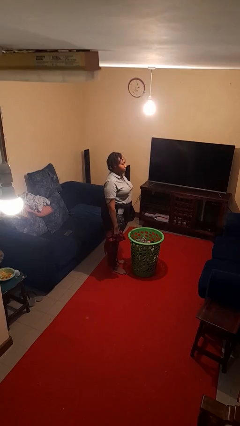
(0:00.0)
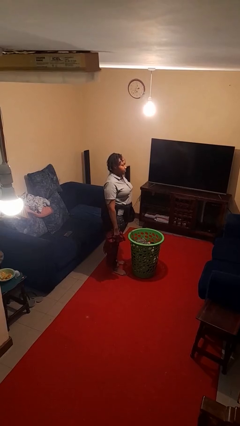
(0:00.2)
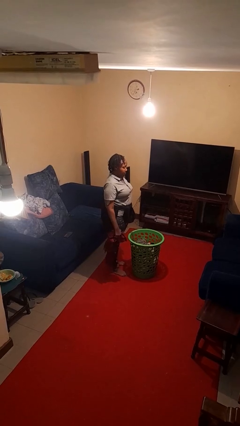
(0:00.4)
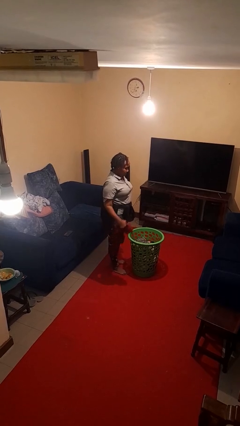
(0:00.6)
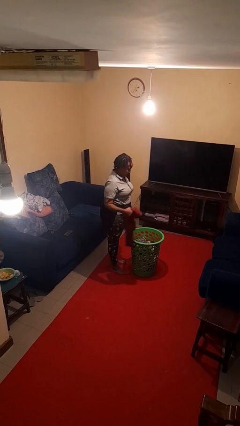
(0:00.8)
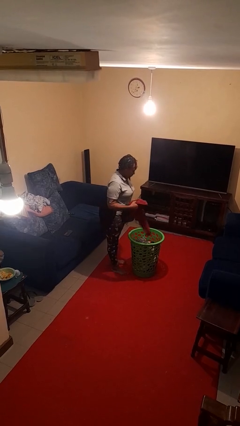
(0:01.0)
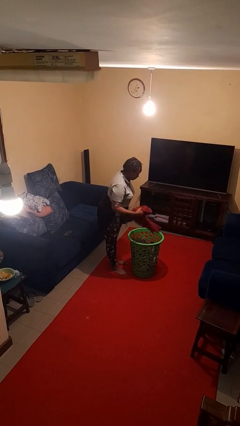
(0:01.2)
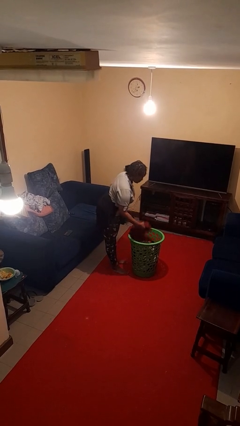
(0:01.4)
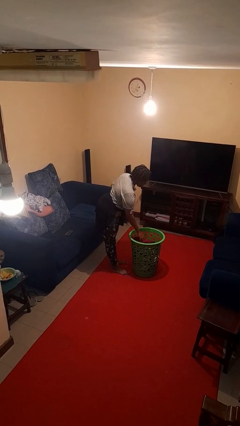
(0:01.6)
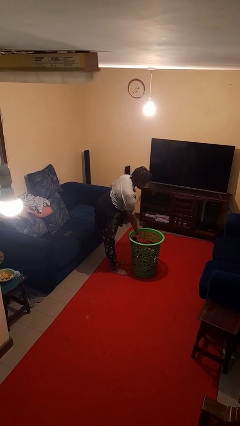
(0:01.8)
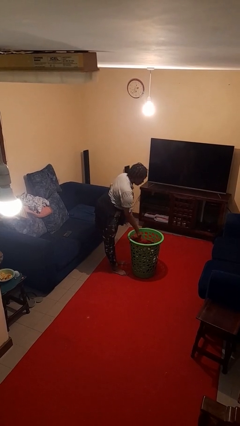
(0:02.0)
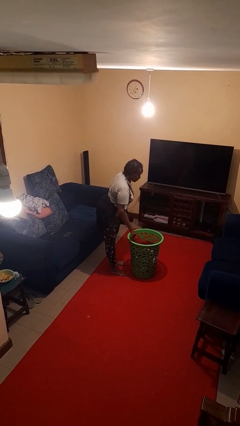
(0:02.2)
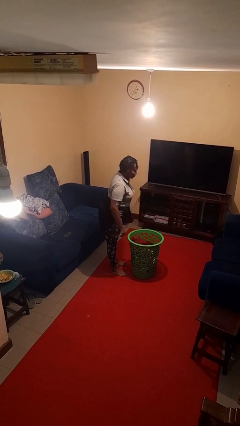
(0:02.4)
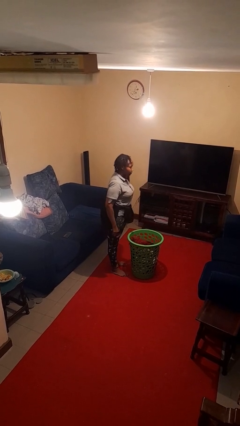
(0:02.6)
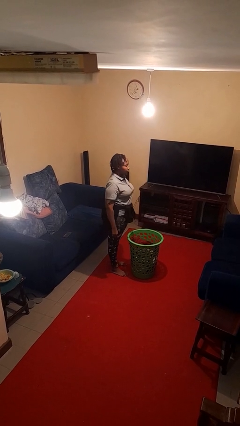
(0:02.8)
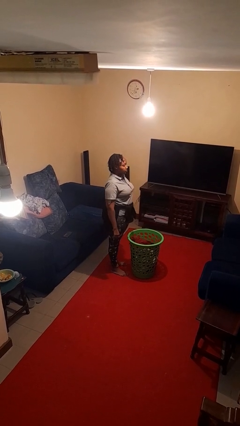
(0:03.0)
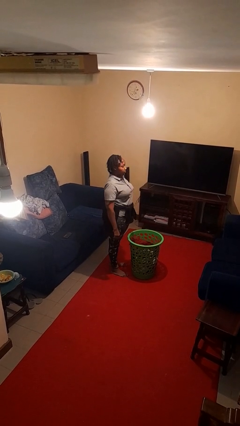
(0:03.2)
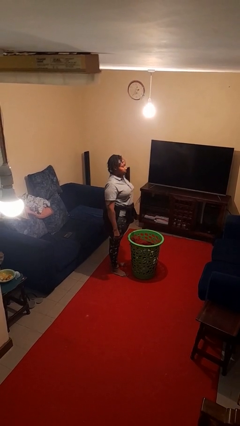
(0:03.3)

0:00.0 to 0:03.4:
person puts object into basket

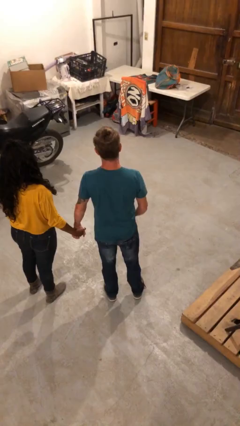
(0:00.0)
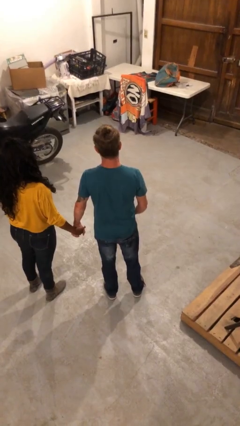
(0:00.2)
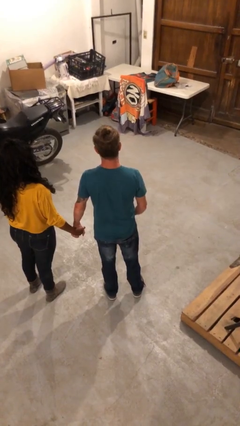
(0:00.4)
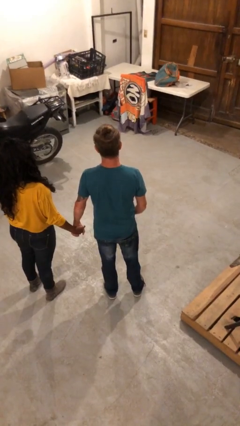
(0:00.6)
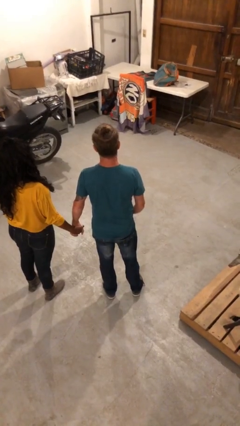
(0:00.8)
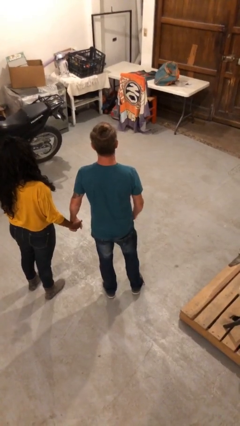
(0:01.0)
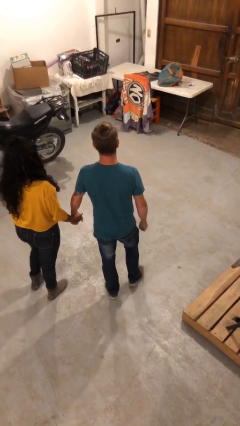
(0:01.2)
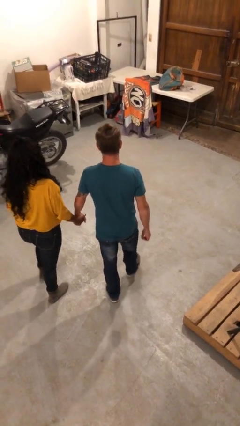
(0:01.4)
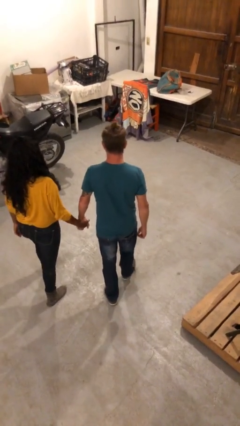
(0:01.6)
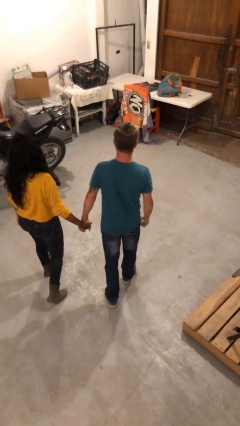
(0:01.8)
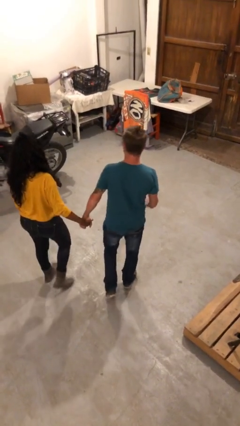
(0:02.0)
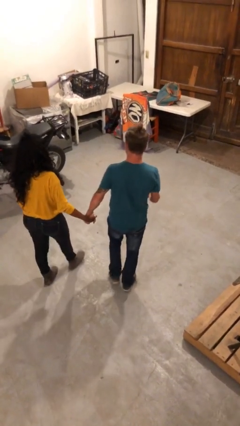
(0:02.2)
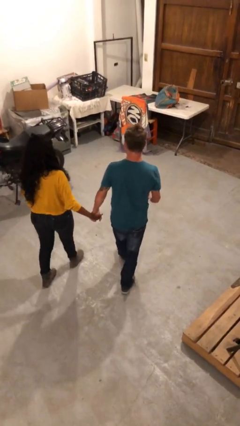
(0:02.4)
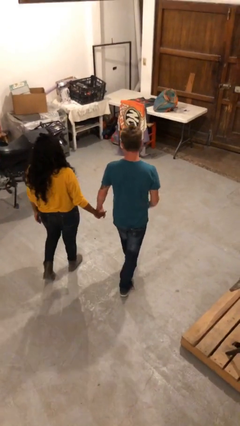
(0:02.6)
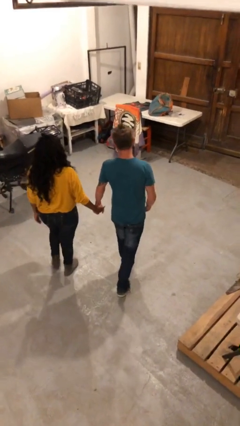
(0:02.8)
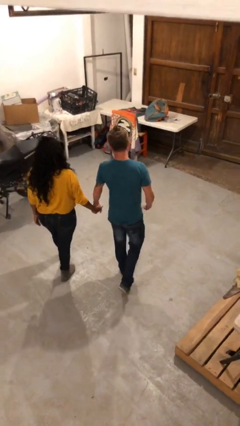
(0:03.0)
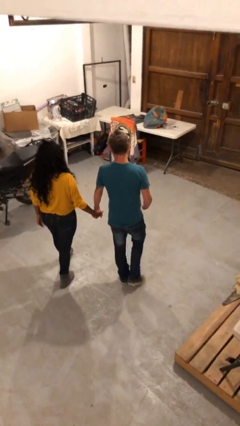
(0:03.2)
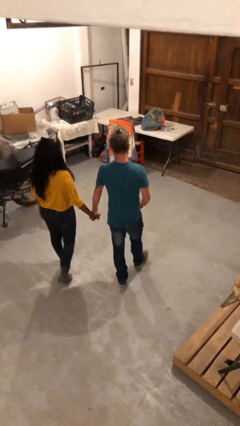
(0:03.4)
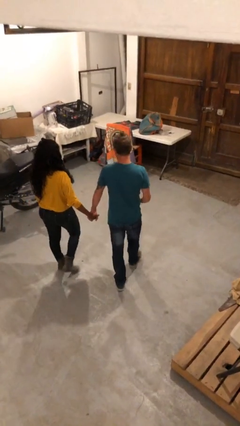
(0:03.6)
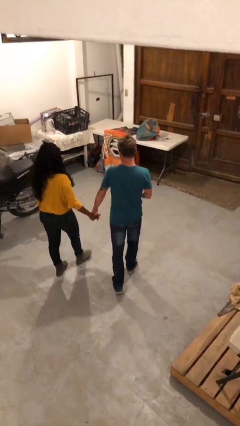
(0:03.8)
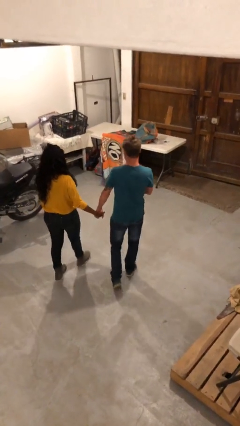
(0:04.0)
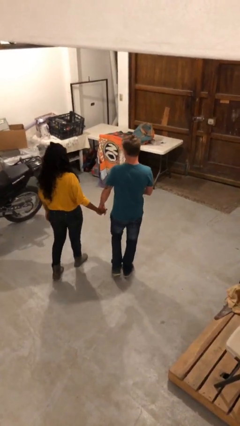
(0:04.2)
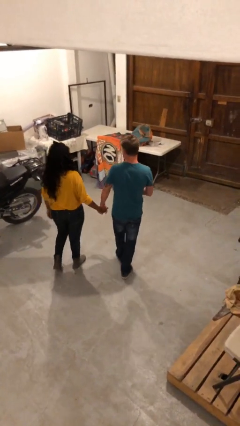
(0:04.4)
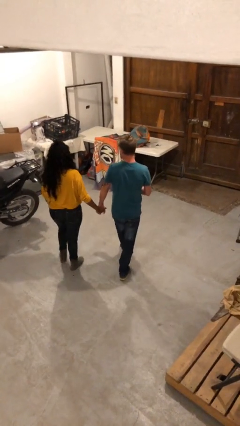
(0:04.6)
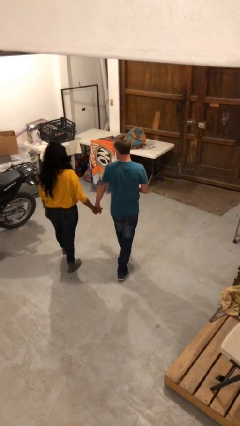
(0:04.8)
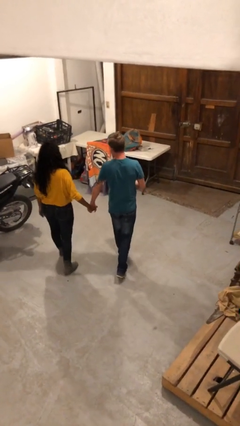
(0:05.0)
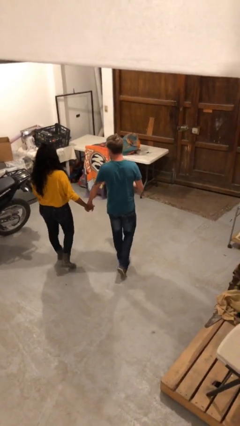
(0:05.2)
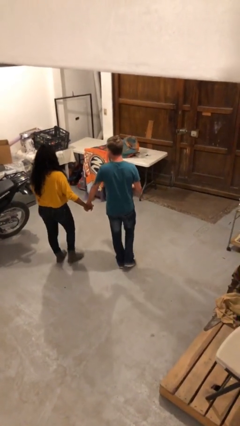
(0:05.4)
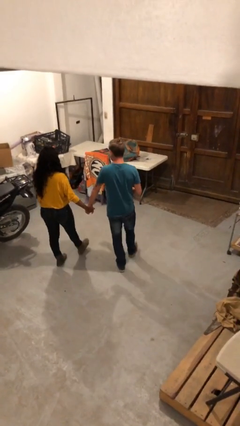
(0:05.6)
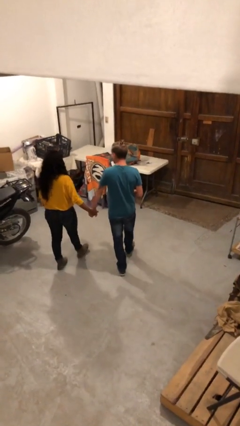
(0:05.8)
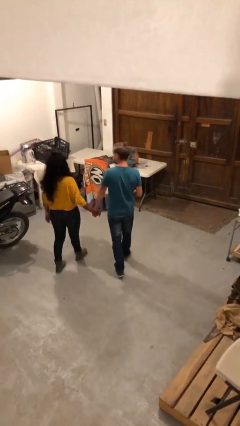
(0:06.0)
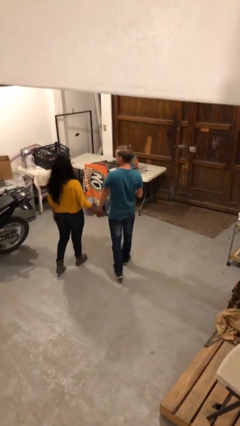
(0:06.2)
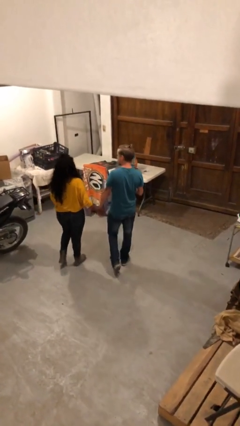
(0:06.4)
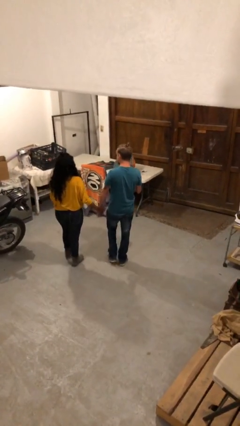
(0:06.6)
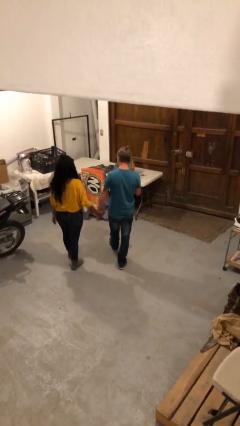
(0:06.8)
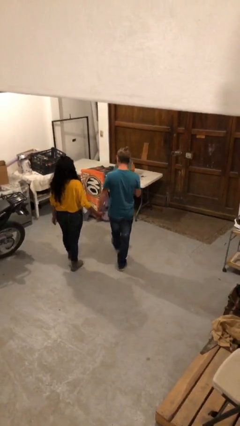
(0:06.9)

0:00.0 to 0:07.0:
person holds hand

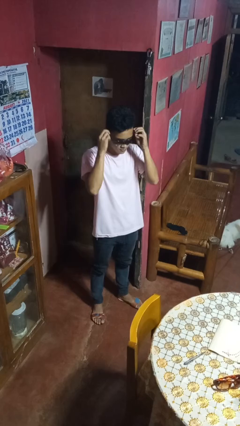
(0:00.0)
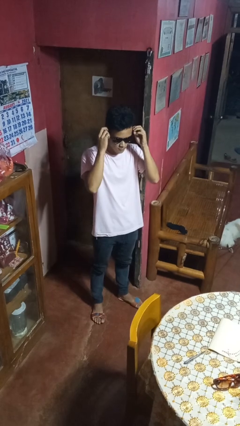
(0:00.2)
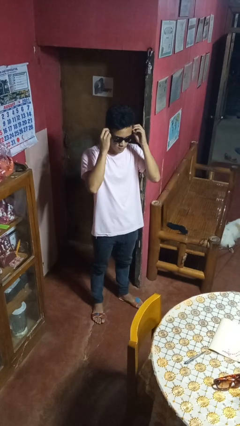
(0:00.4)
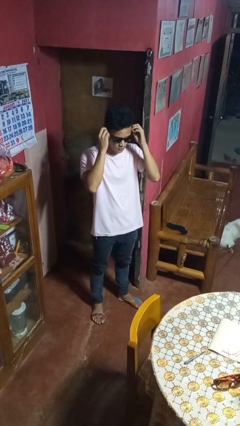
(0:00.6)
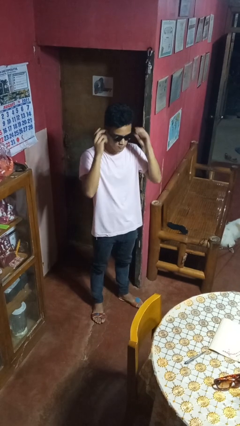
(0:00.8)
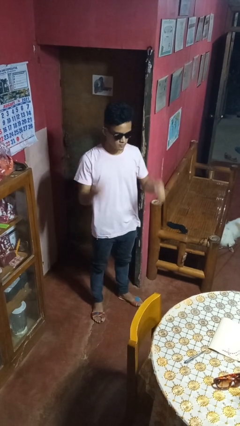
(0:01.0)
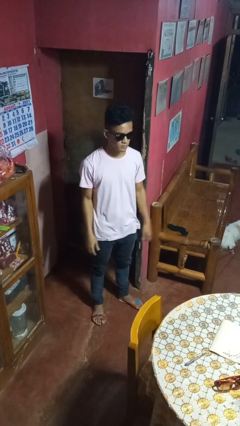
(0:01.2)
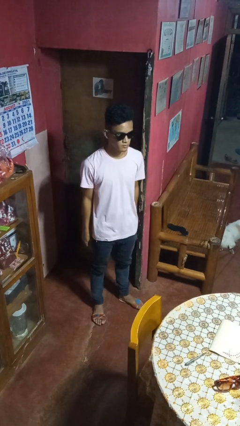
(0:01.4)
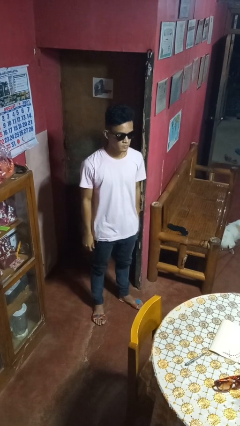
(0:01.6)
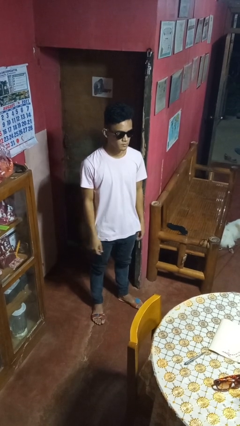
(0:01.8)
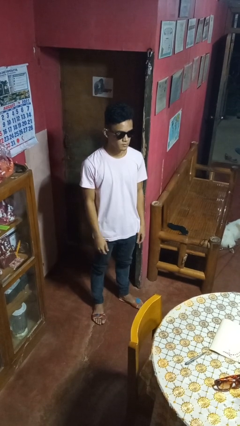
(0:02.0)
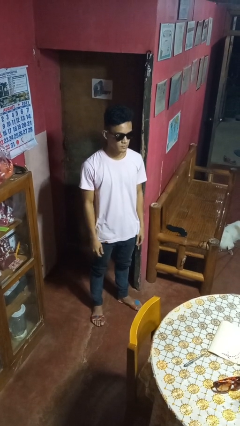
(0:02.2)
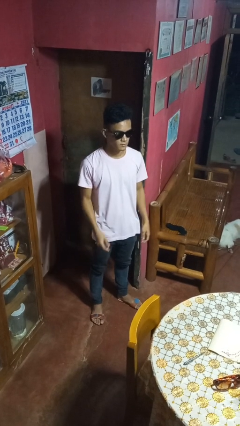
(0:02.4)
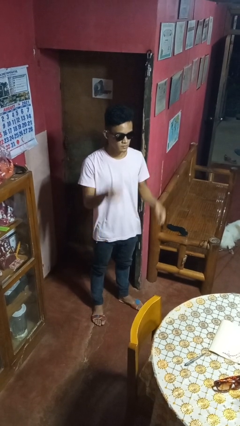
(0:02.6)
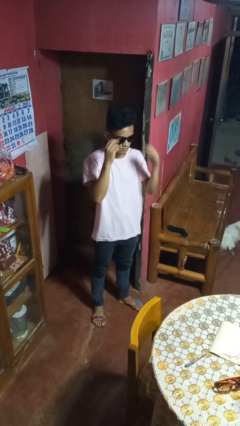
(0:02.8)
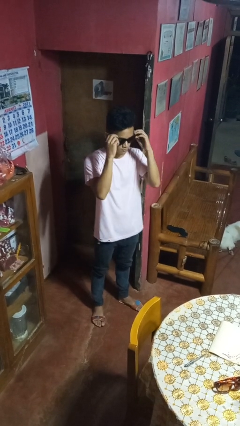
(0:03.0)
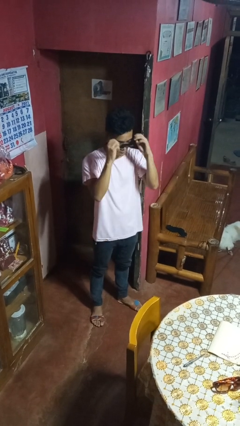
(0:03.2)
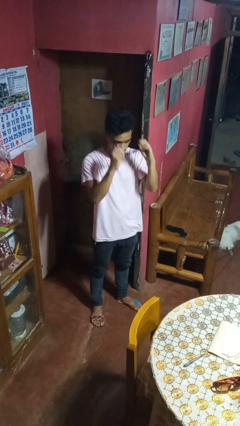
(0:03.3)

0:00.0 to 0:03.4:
person puts on sunglasses

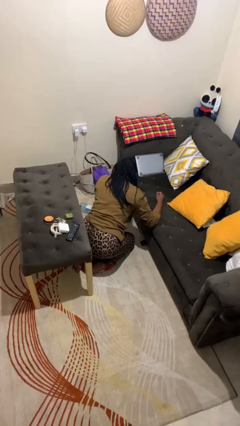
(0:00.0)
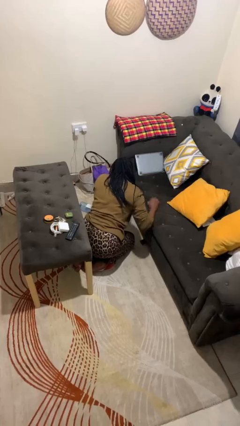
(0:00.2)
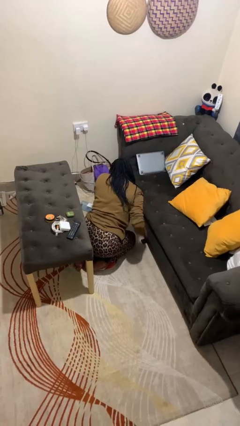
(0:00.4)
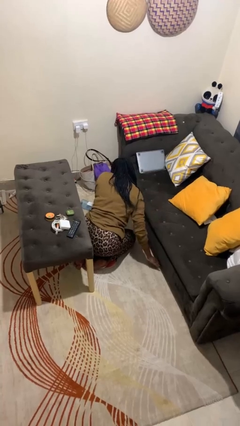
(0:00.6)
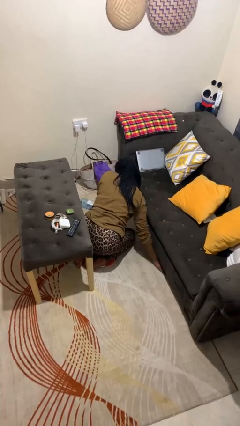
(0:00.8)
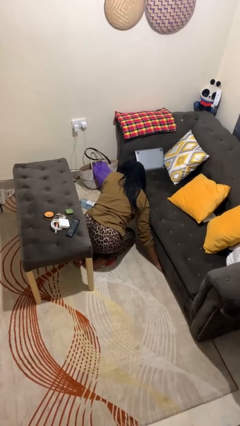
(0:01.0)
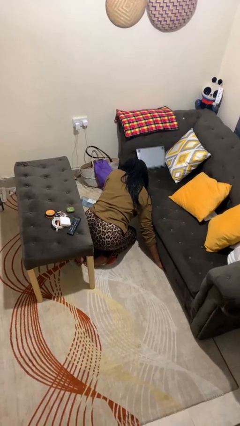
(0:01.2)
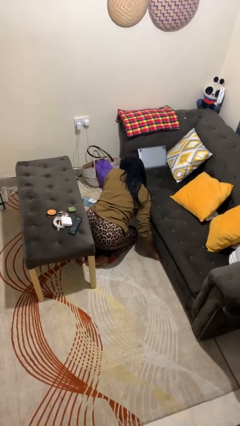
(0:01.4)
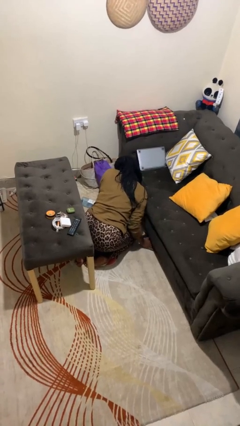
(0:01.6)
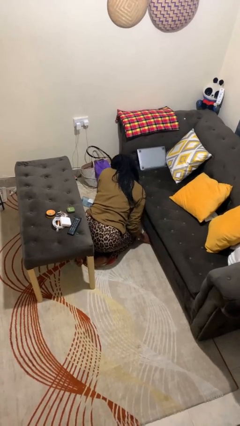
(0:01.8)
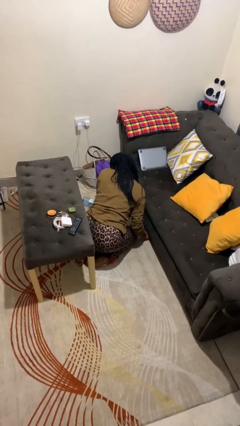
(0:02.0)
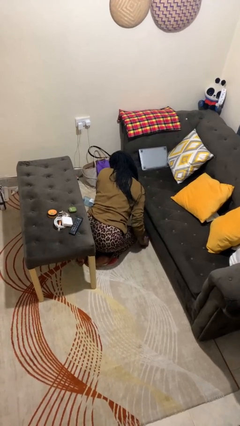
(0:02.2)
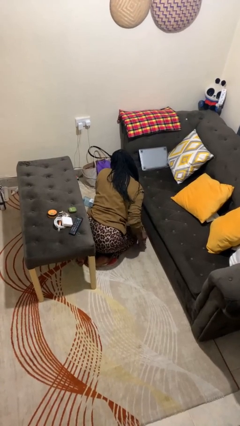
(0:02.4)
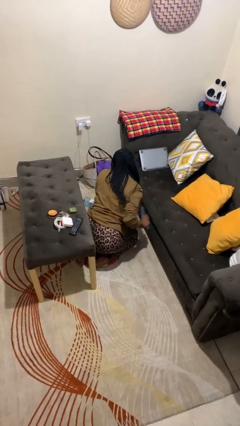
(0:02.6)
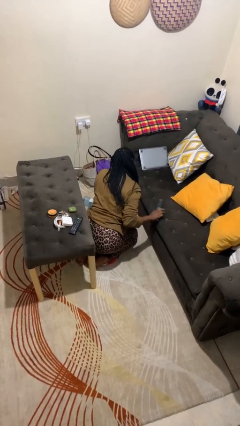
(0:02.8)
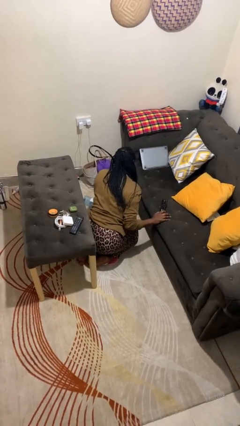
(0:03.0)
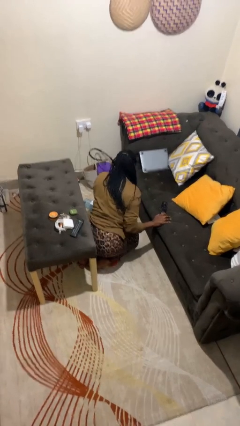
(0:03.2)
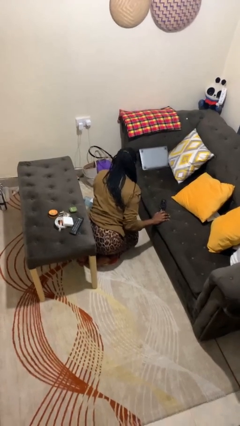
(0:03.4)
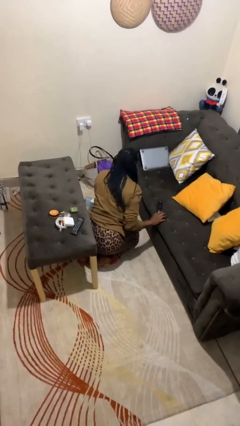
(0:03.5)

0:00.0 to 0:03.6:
person searches under couch

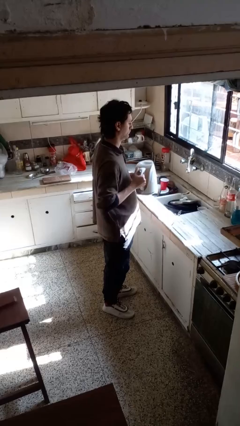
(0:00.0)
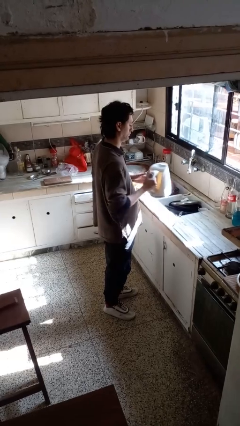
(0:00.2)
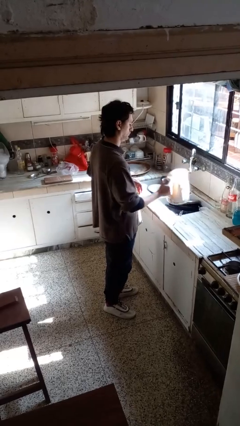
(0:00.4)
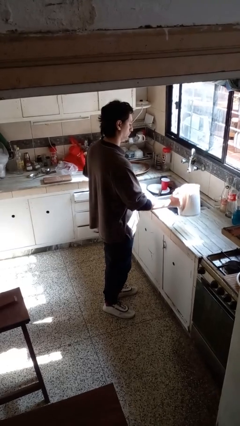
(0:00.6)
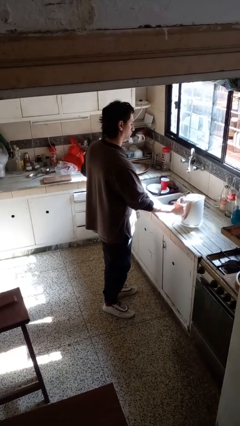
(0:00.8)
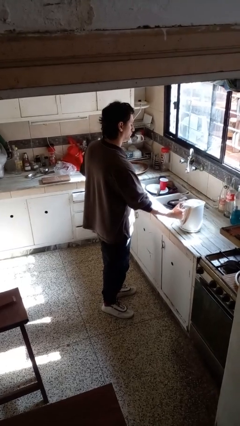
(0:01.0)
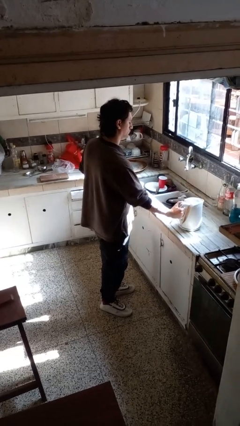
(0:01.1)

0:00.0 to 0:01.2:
person puts down object on countertop
